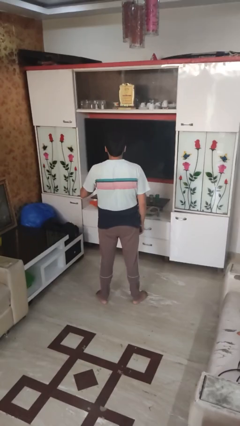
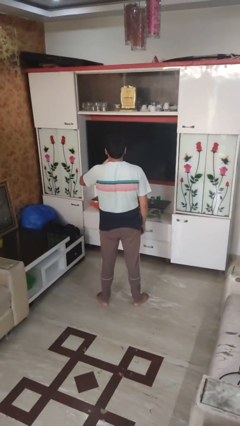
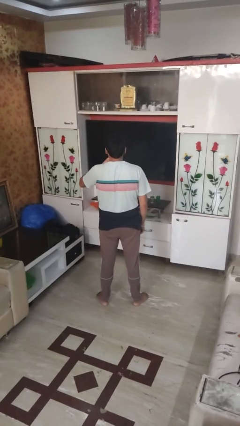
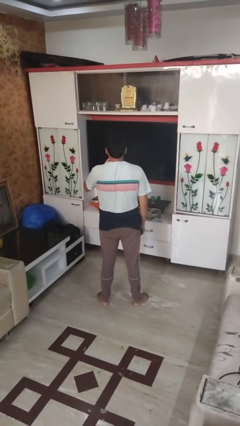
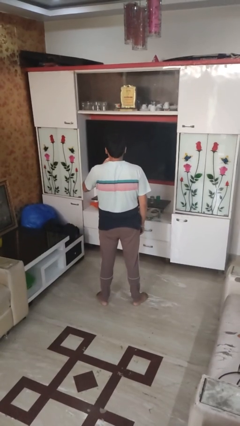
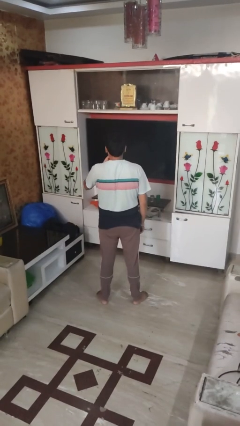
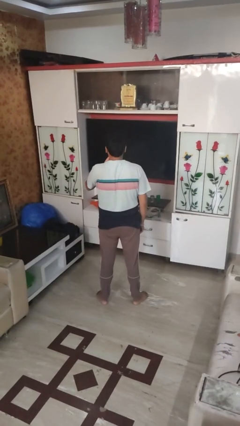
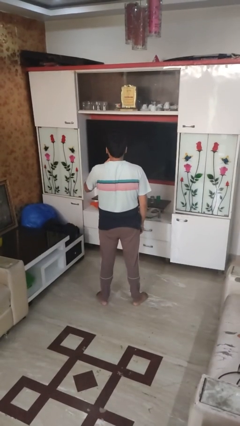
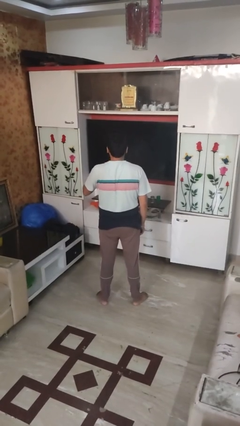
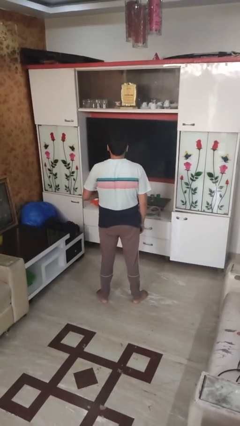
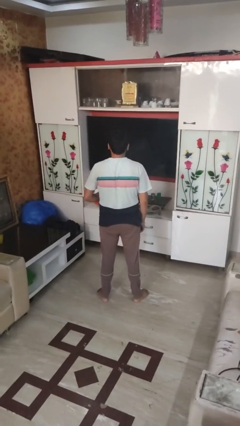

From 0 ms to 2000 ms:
person strokes chin

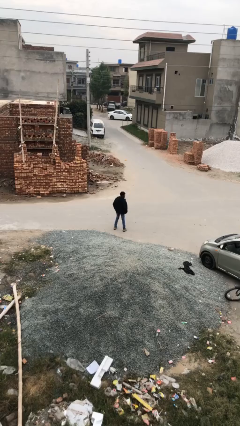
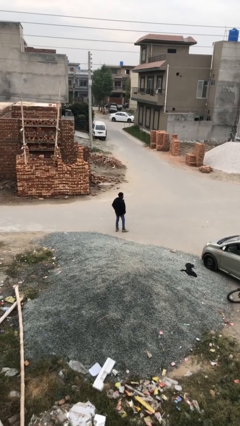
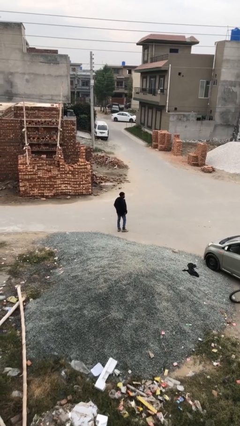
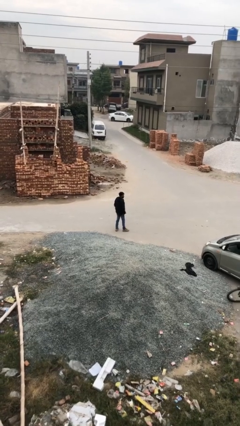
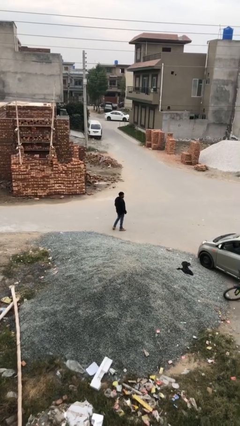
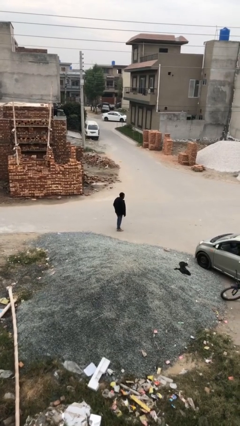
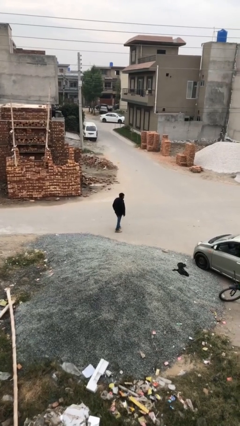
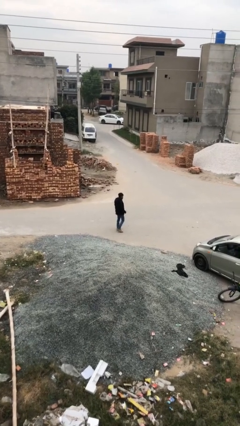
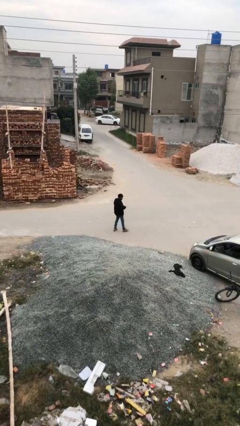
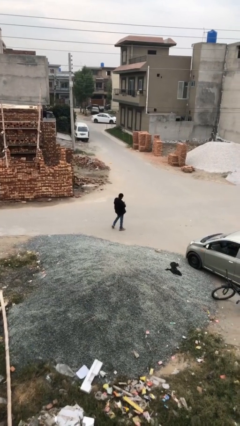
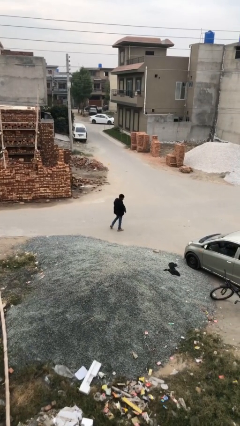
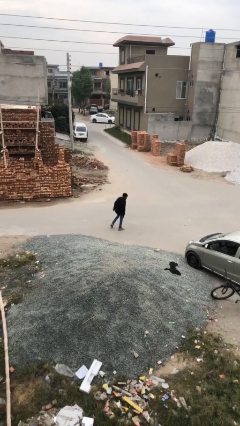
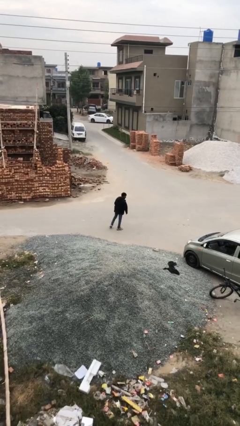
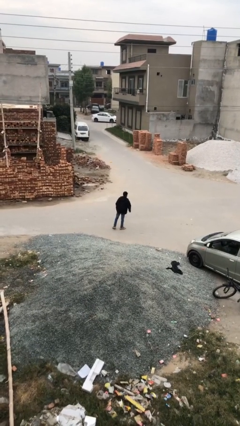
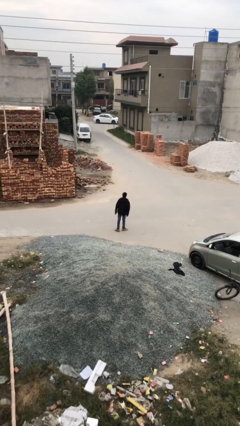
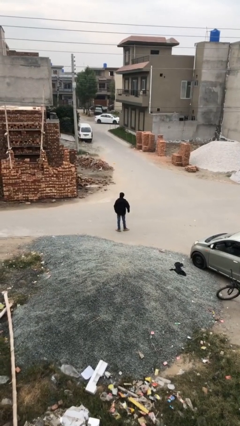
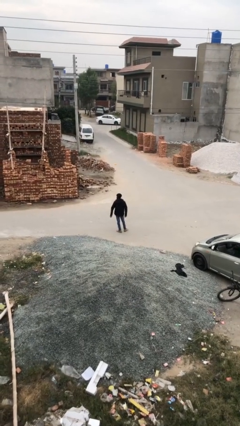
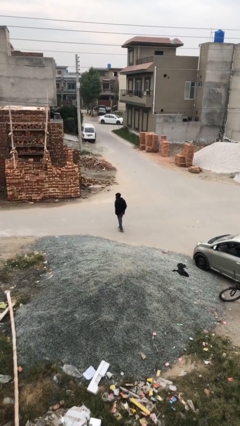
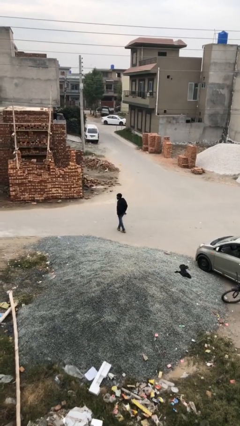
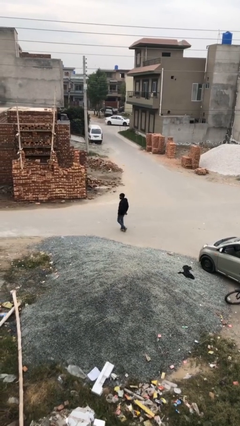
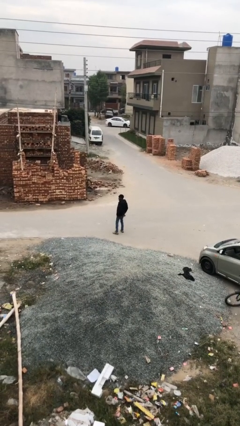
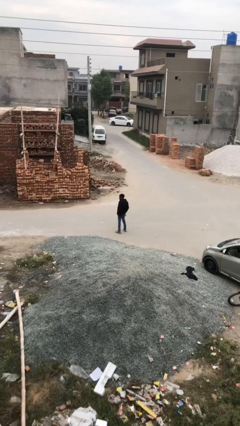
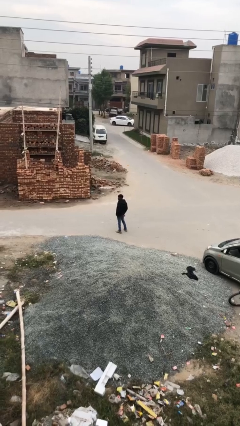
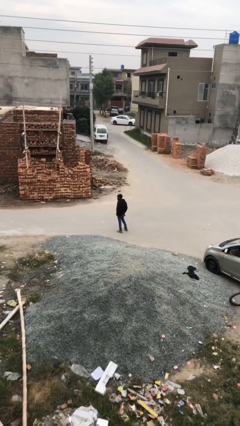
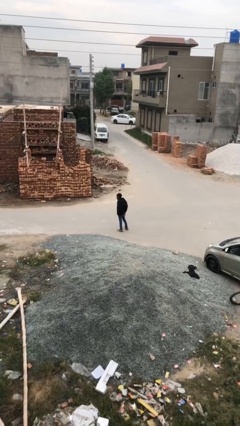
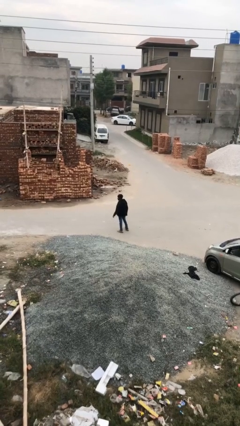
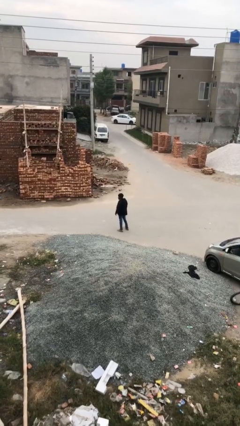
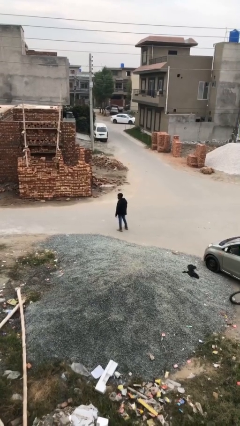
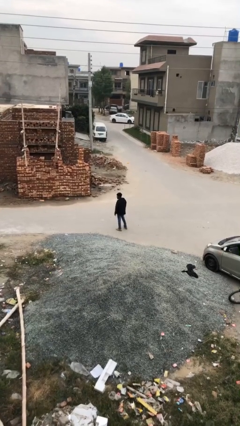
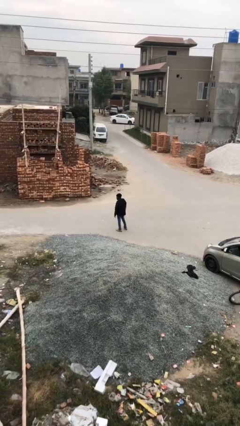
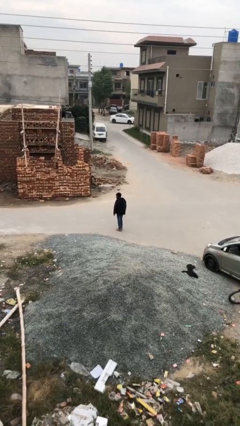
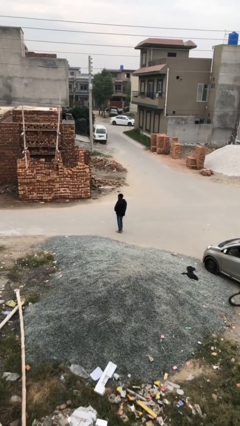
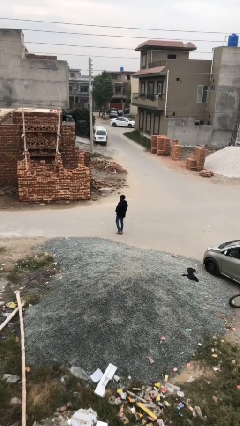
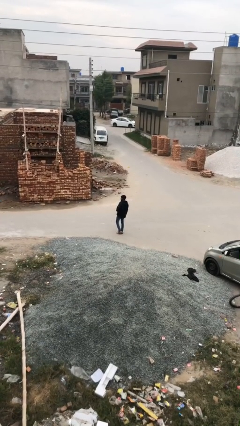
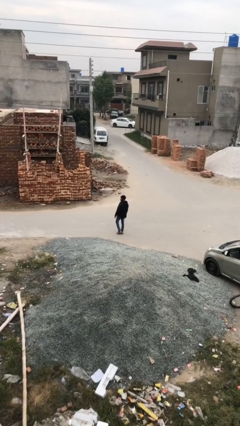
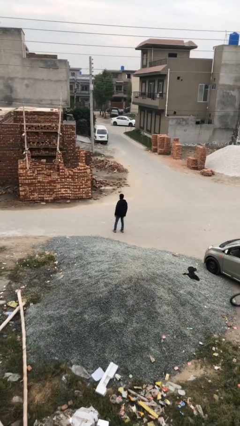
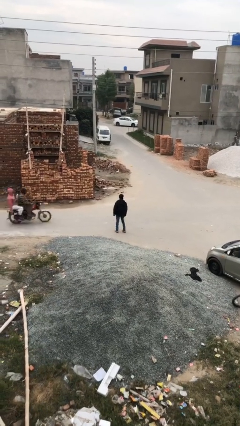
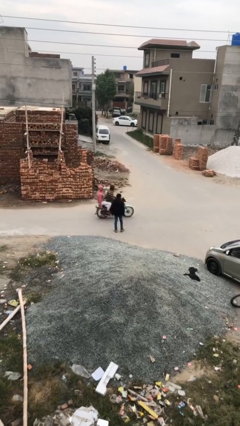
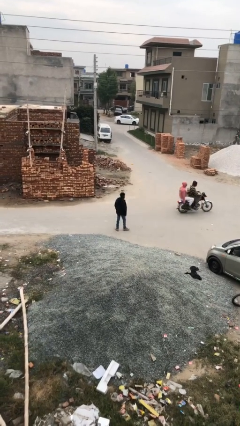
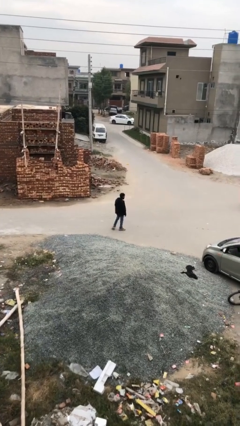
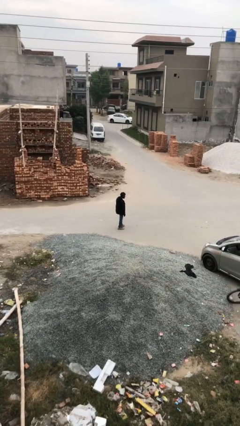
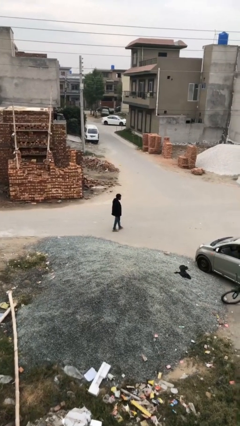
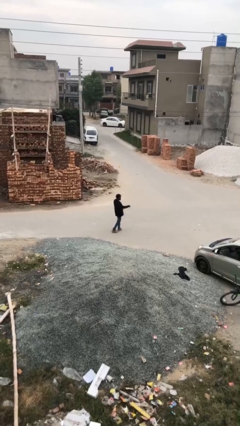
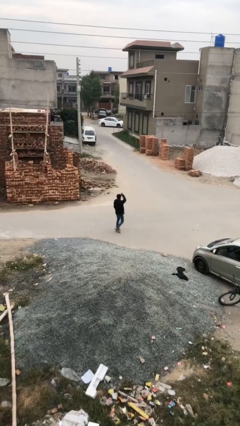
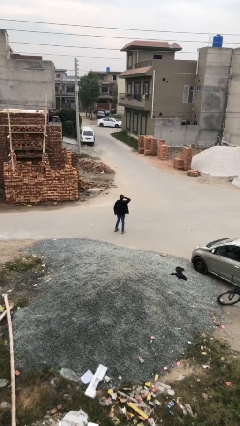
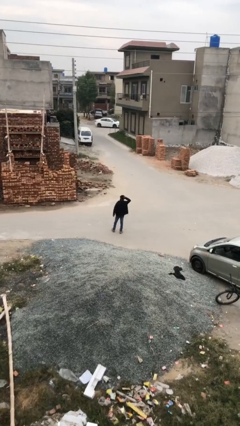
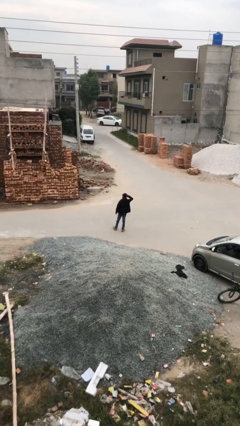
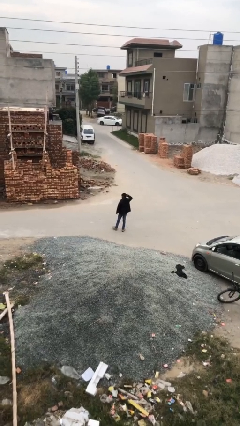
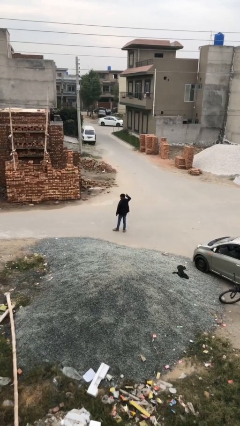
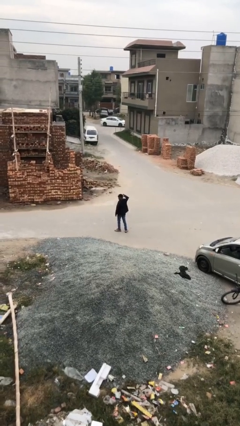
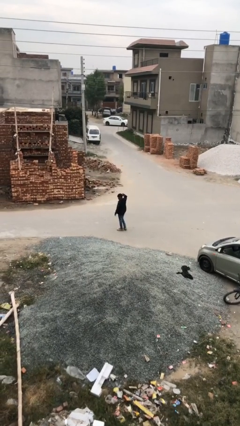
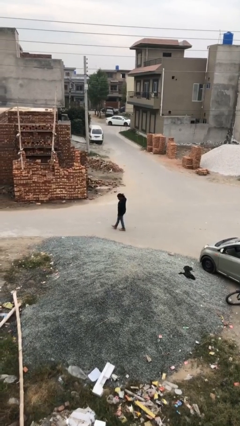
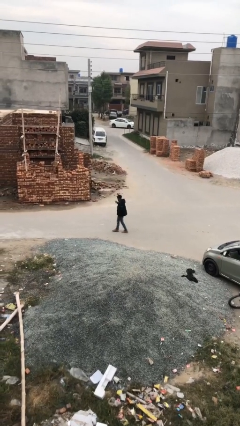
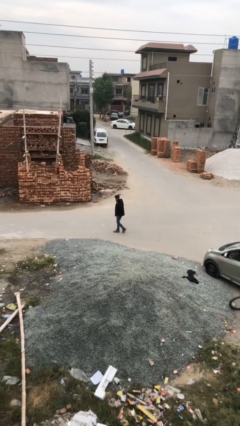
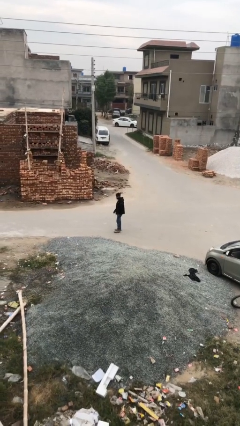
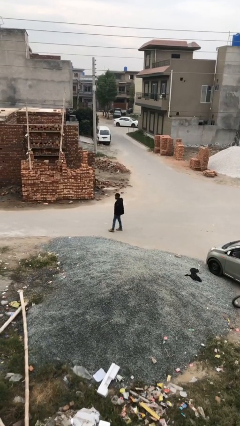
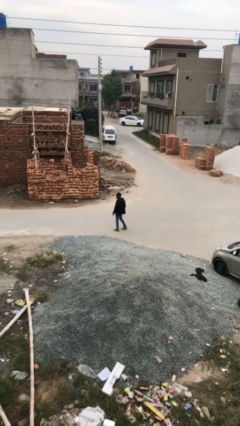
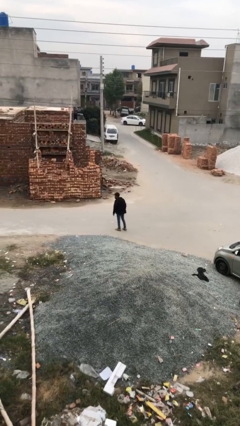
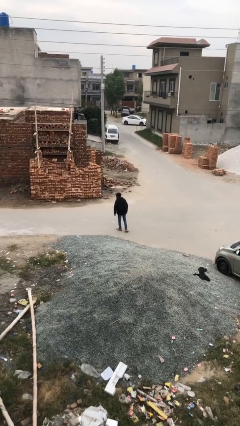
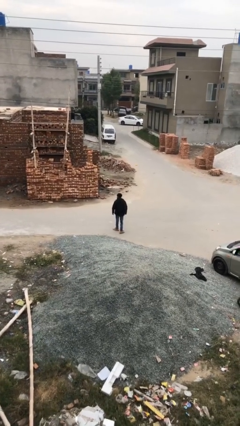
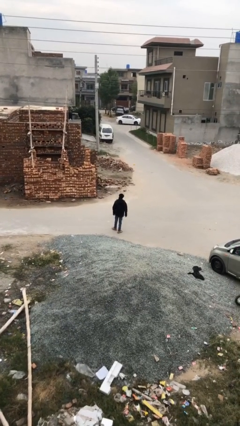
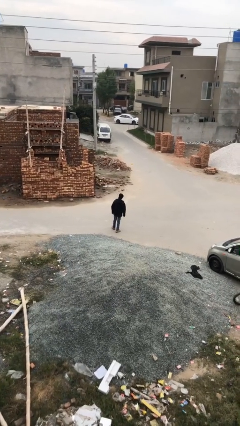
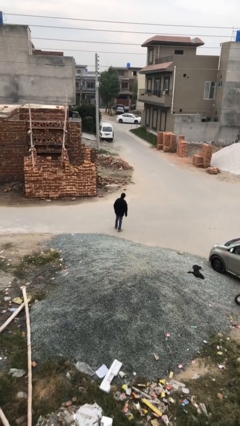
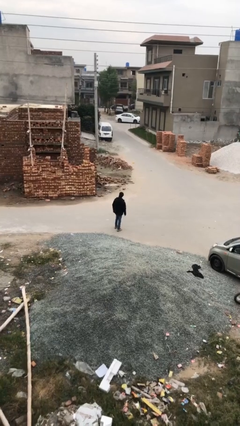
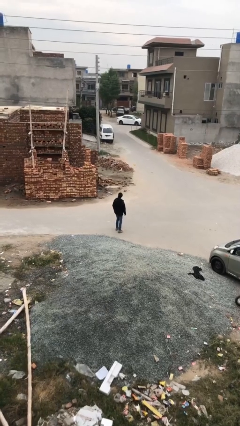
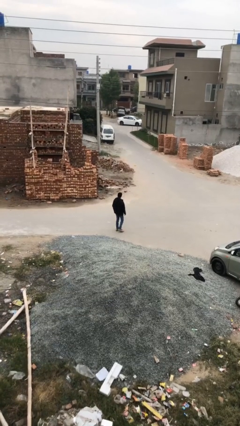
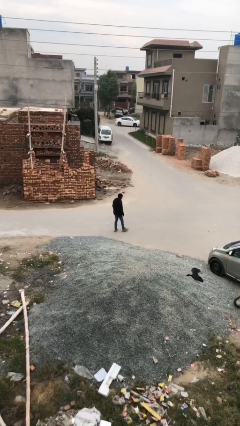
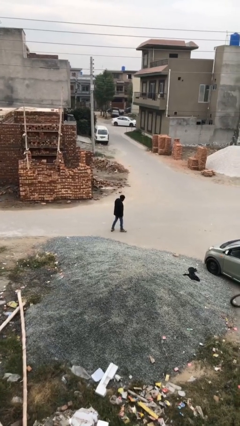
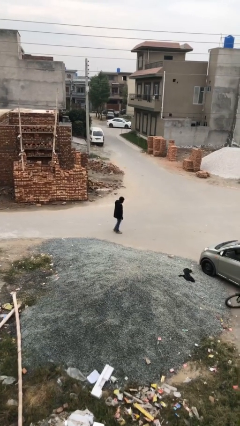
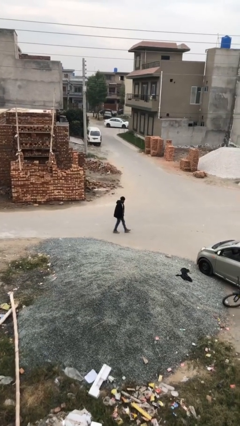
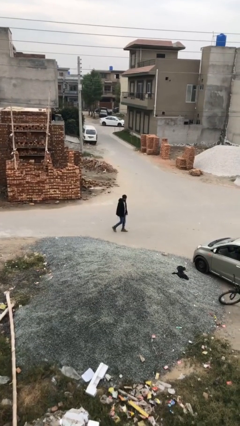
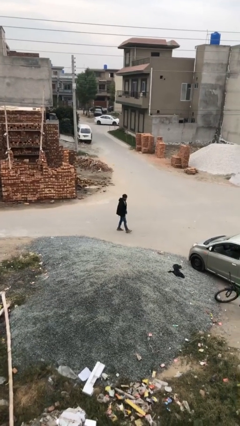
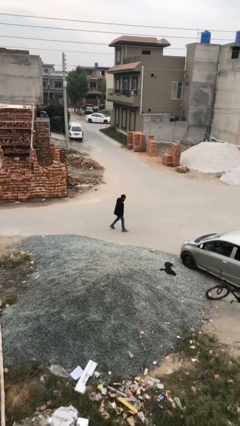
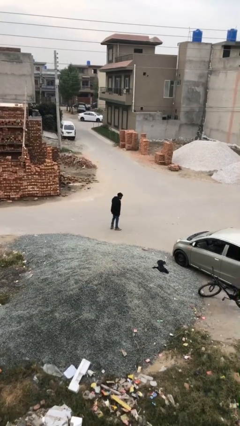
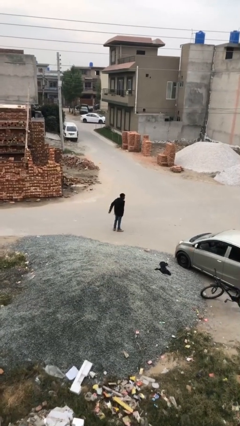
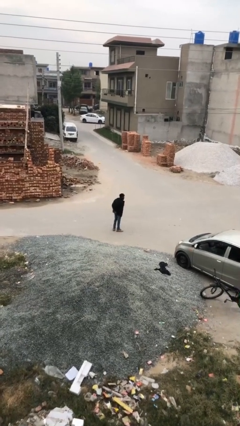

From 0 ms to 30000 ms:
person walks

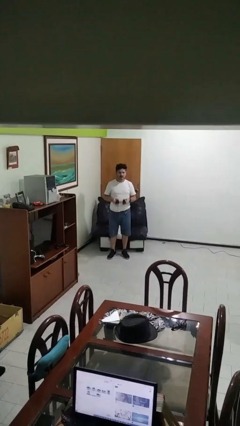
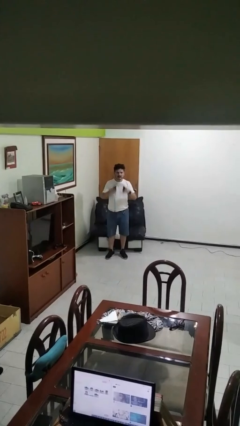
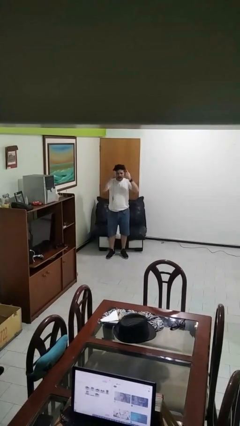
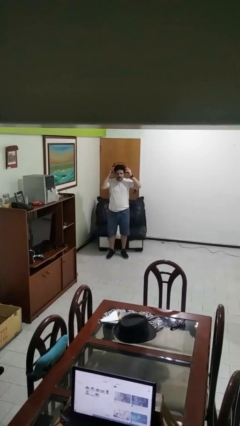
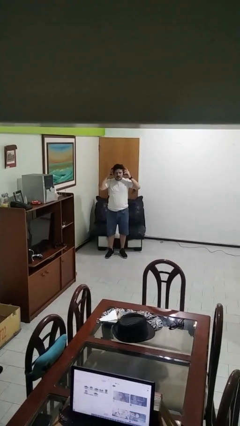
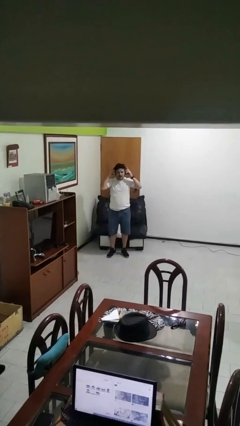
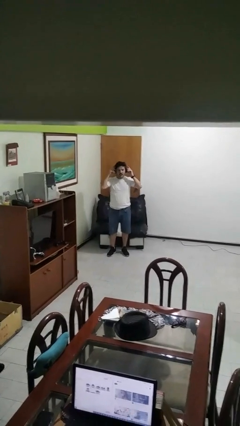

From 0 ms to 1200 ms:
person puts on headphones
